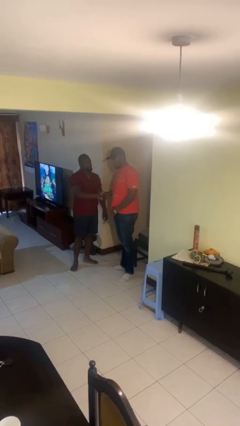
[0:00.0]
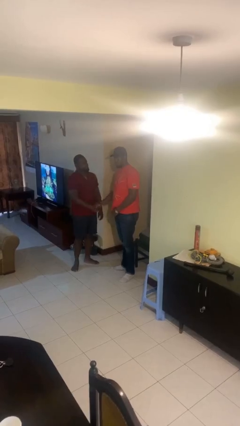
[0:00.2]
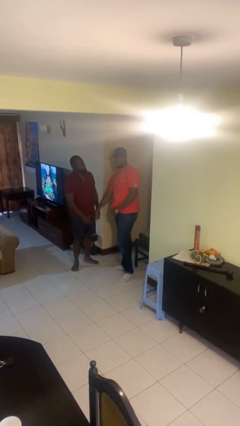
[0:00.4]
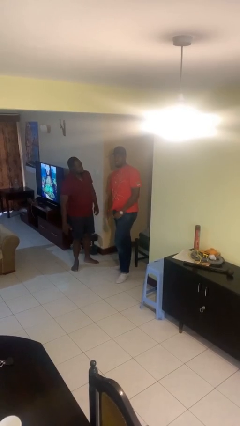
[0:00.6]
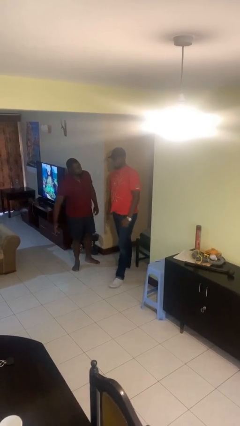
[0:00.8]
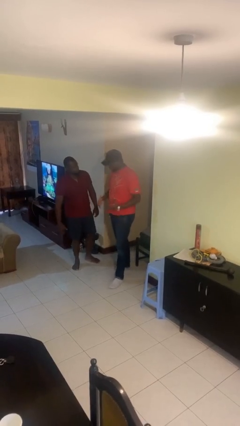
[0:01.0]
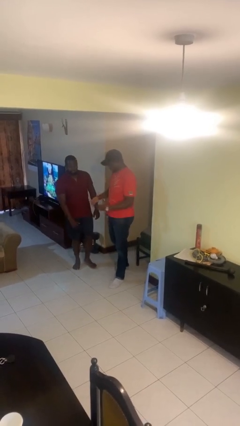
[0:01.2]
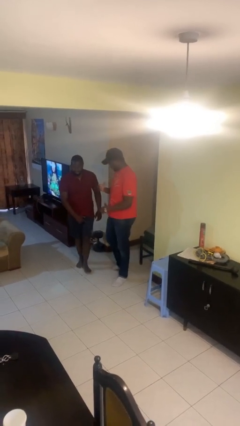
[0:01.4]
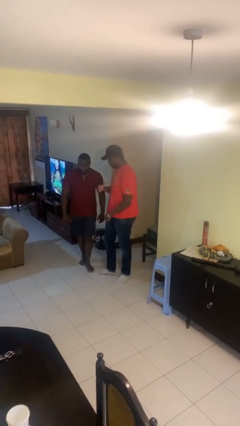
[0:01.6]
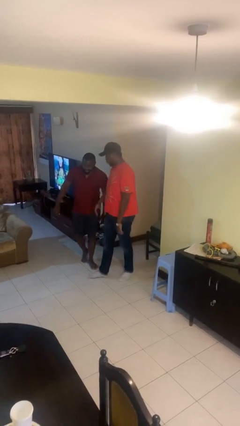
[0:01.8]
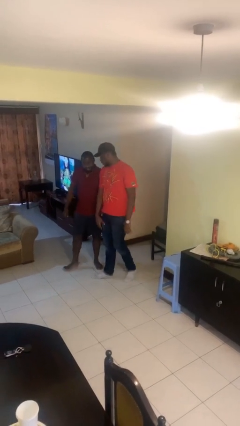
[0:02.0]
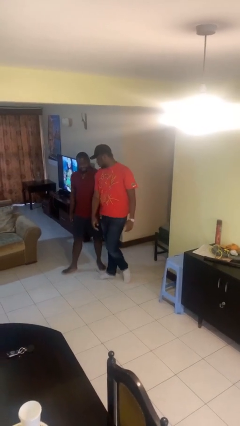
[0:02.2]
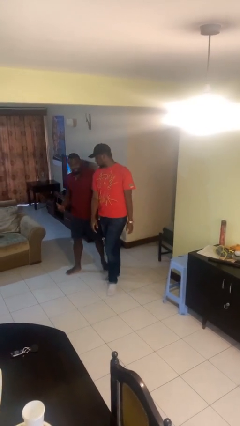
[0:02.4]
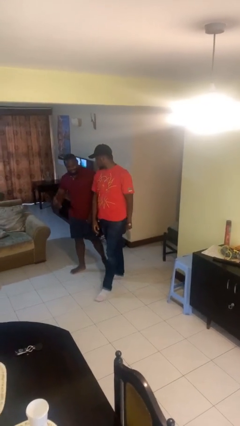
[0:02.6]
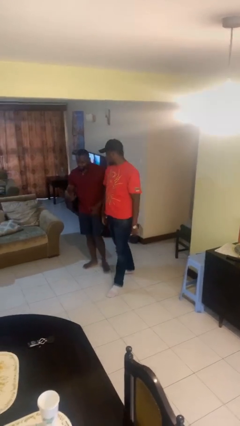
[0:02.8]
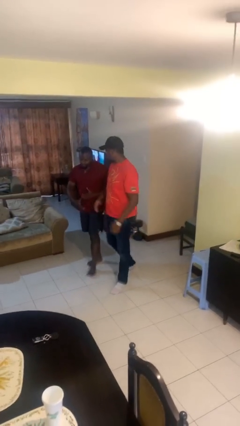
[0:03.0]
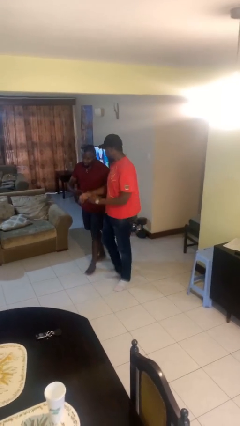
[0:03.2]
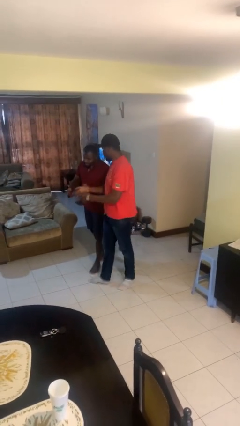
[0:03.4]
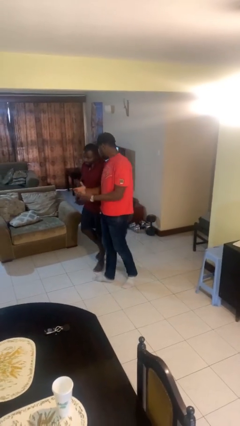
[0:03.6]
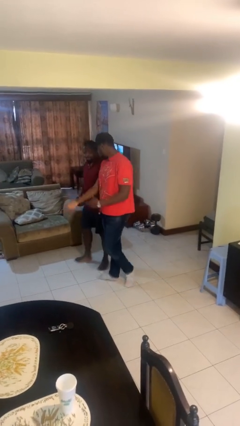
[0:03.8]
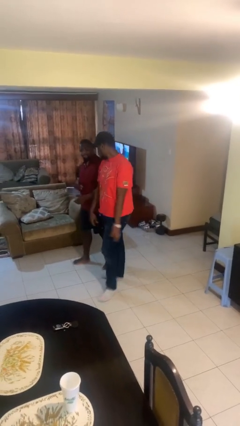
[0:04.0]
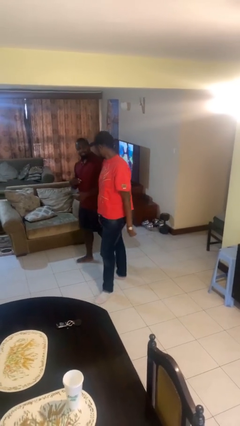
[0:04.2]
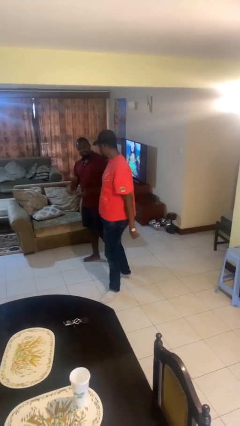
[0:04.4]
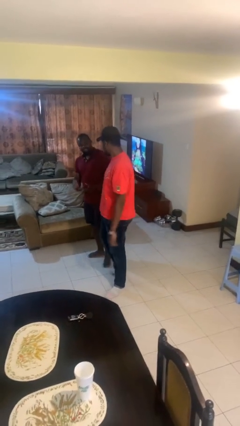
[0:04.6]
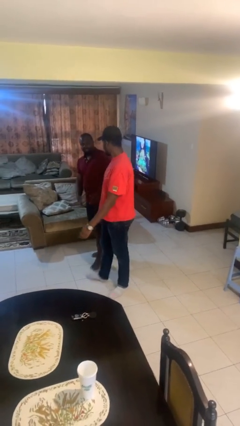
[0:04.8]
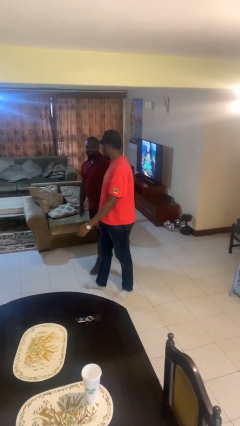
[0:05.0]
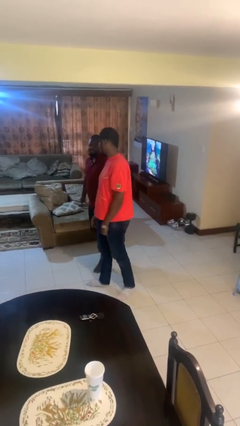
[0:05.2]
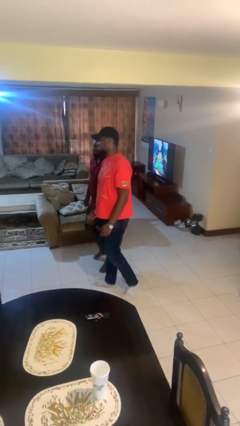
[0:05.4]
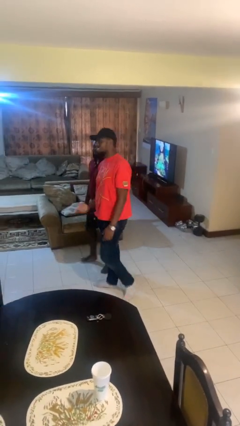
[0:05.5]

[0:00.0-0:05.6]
person talks to person

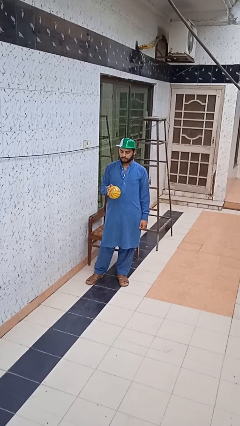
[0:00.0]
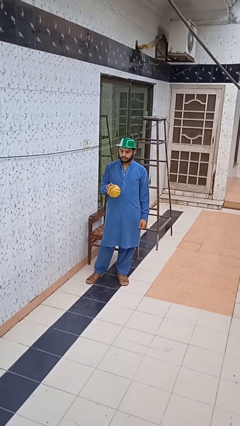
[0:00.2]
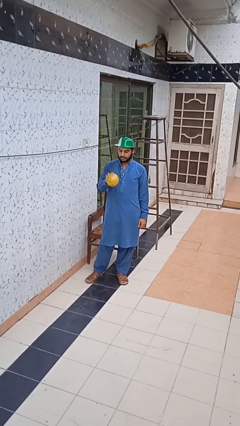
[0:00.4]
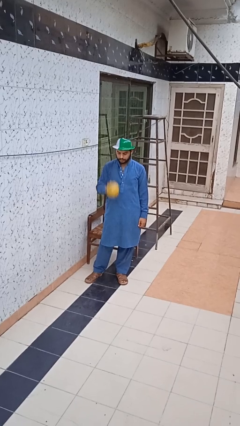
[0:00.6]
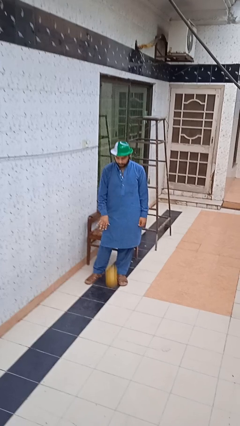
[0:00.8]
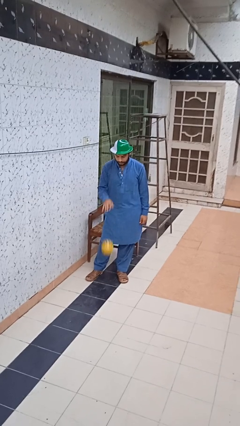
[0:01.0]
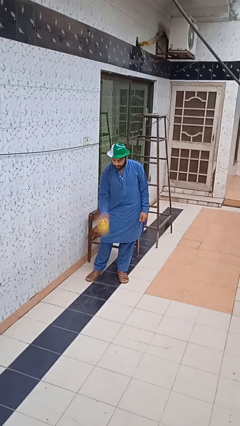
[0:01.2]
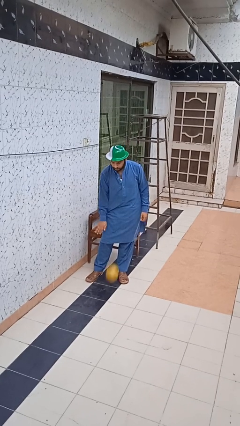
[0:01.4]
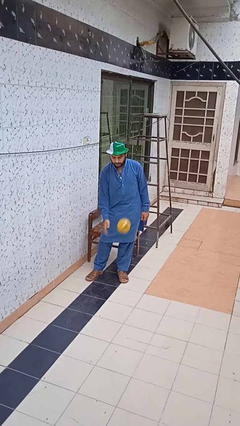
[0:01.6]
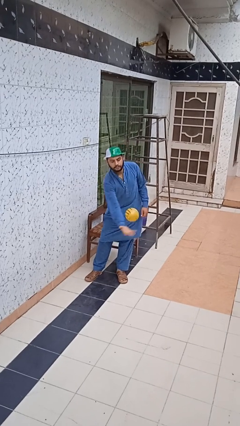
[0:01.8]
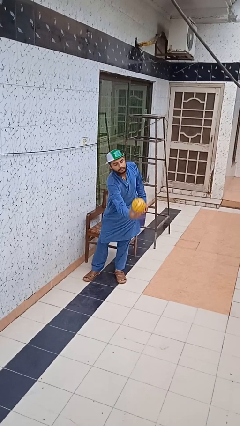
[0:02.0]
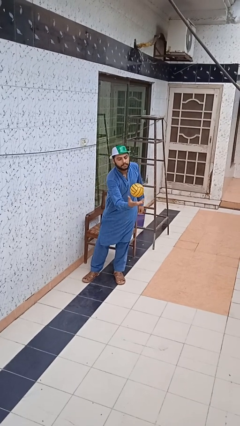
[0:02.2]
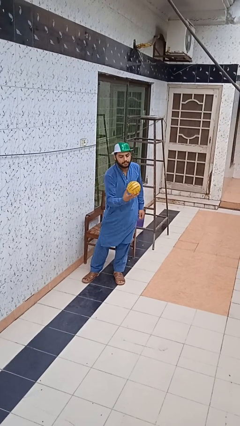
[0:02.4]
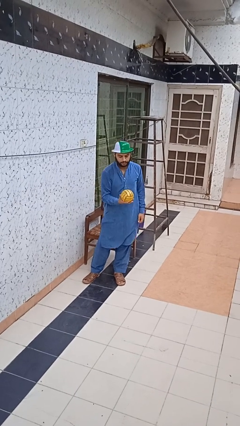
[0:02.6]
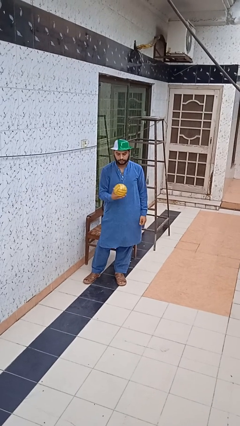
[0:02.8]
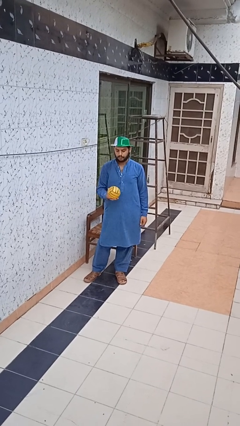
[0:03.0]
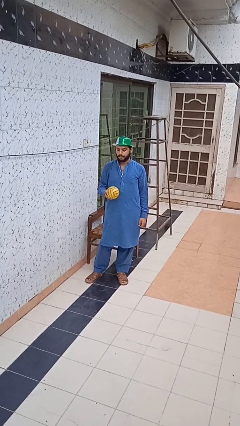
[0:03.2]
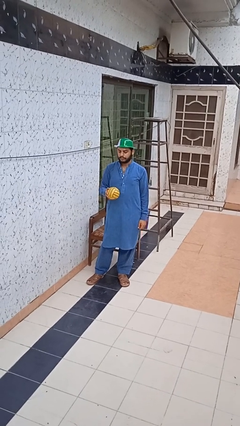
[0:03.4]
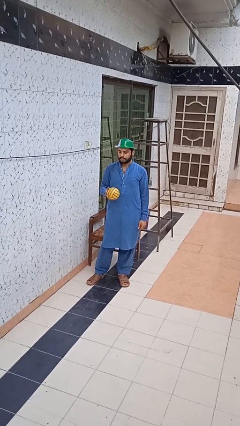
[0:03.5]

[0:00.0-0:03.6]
person bounces ball on floor

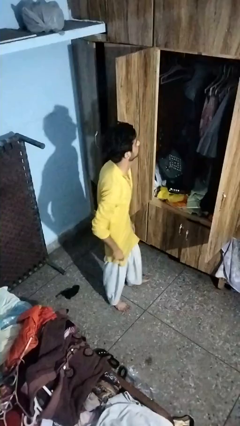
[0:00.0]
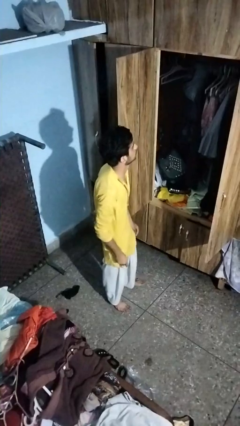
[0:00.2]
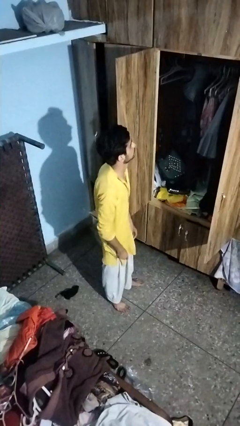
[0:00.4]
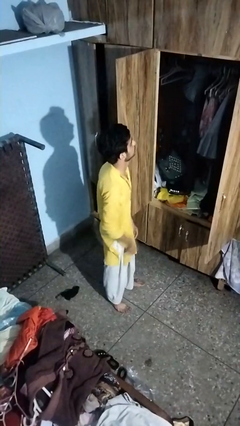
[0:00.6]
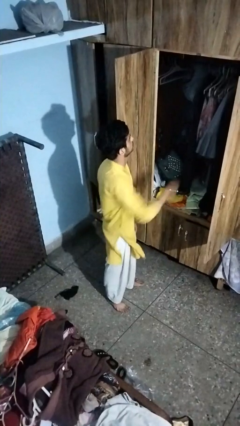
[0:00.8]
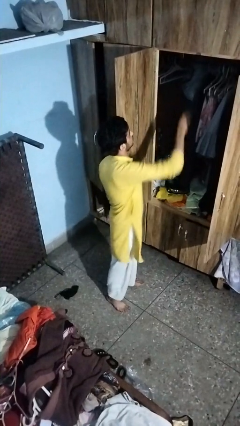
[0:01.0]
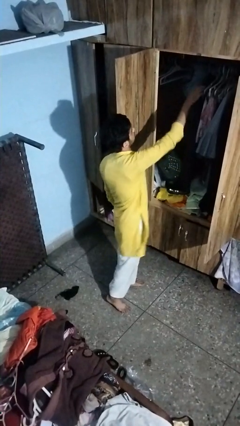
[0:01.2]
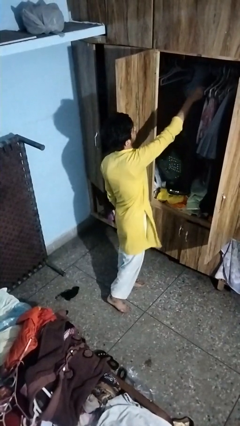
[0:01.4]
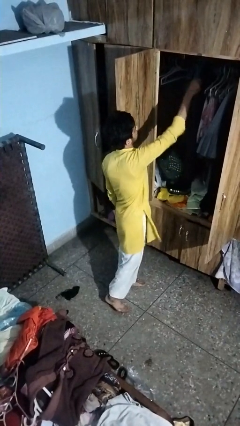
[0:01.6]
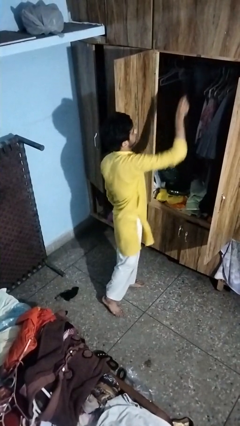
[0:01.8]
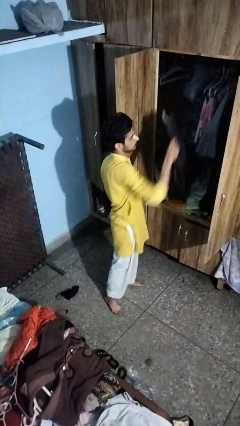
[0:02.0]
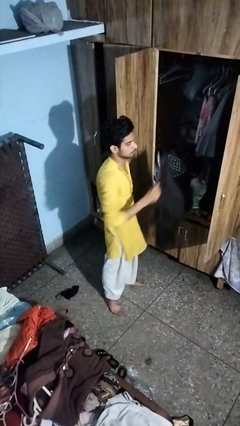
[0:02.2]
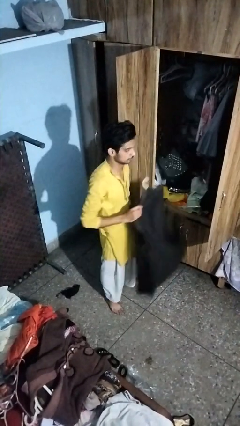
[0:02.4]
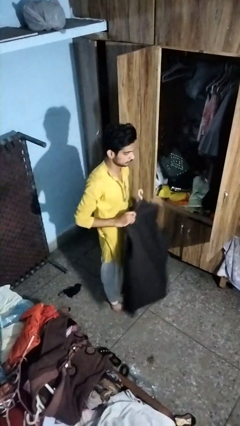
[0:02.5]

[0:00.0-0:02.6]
person takes clothes from closet

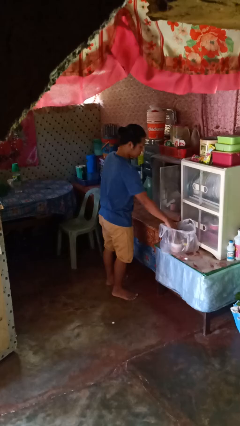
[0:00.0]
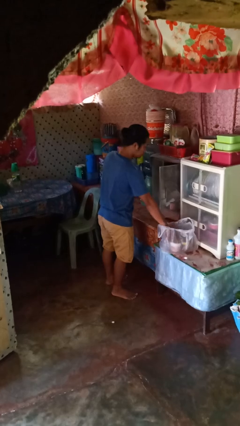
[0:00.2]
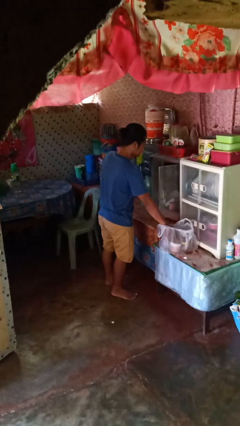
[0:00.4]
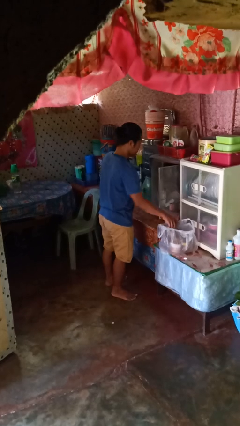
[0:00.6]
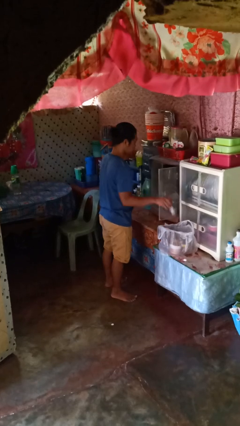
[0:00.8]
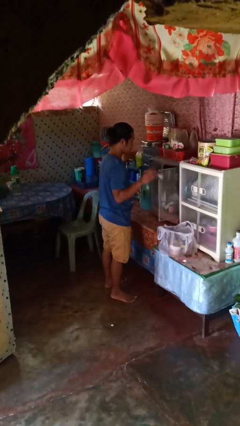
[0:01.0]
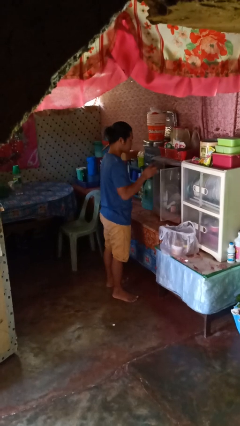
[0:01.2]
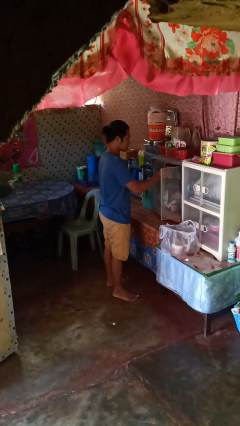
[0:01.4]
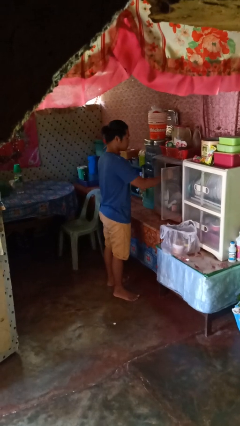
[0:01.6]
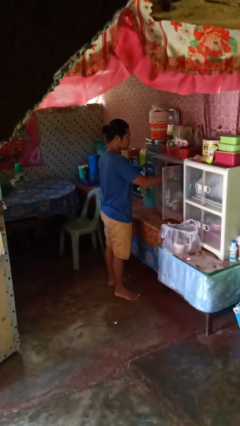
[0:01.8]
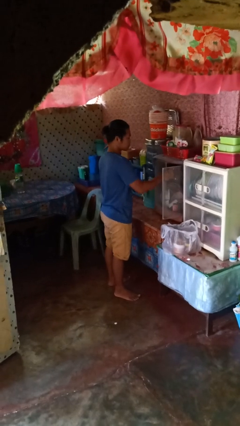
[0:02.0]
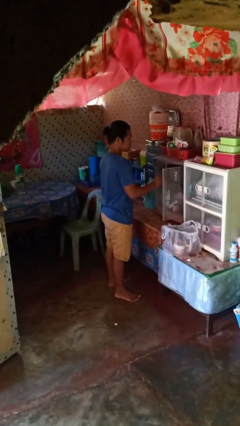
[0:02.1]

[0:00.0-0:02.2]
person loads groceries into cabinet

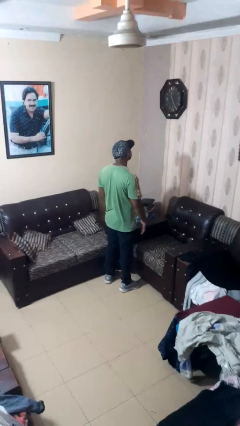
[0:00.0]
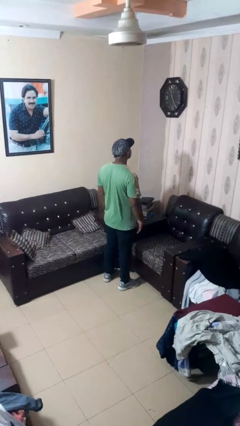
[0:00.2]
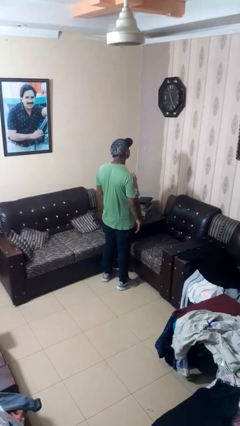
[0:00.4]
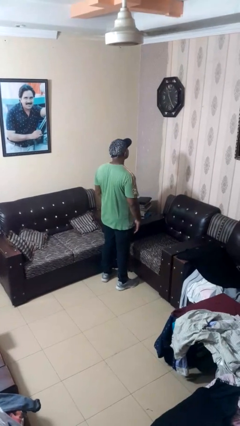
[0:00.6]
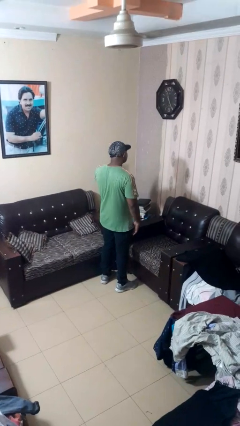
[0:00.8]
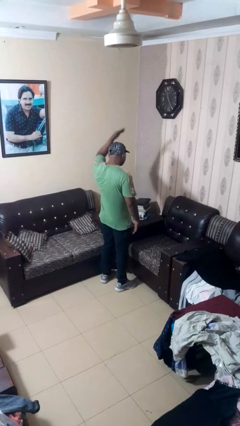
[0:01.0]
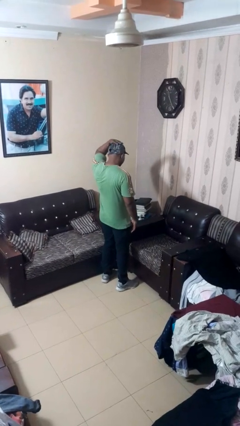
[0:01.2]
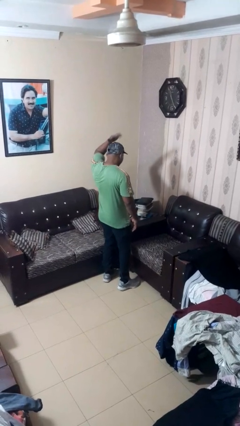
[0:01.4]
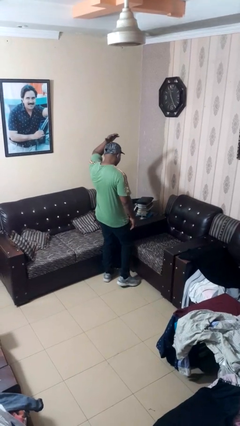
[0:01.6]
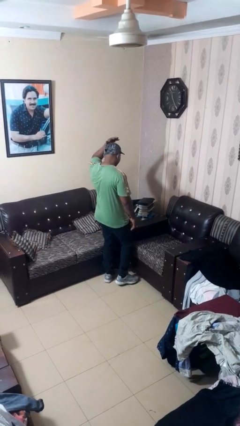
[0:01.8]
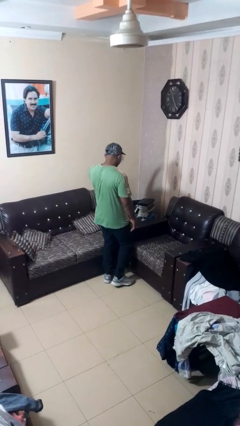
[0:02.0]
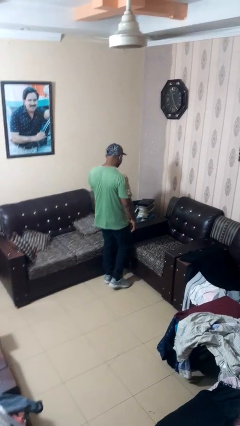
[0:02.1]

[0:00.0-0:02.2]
person pats head

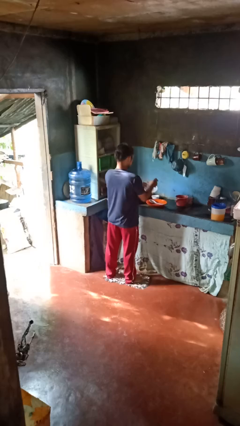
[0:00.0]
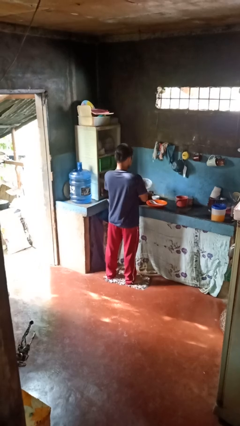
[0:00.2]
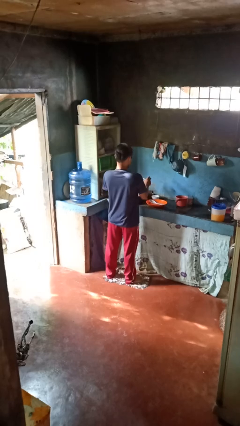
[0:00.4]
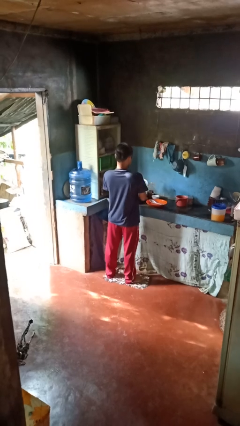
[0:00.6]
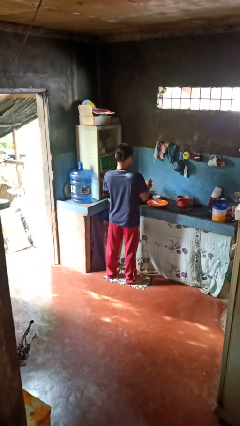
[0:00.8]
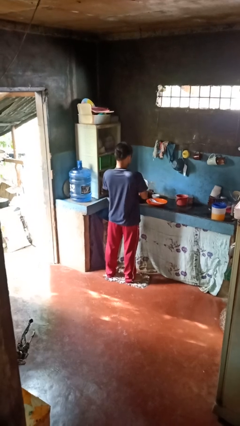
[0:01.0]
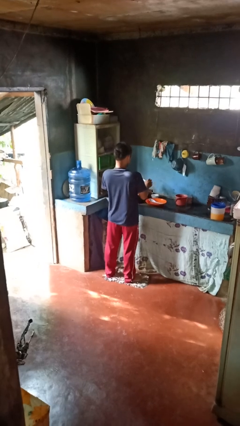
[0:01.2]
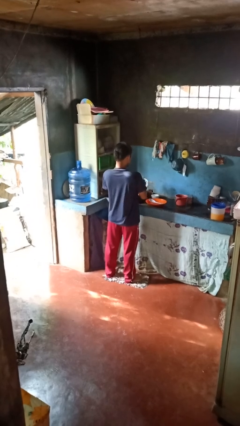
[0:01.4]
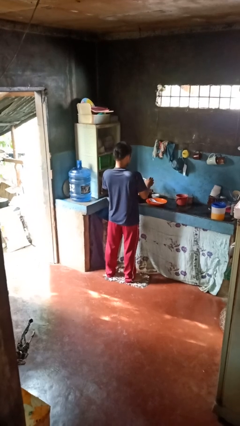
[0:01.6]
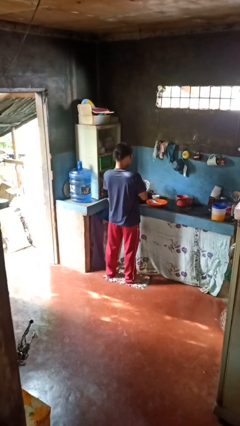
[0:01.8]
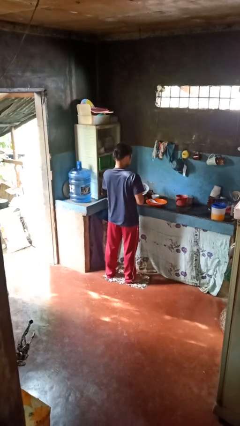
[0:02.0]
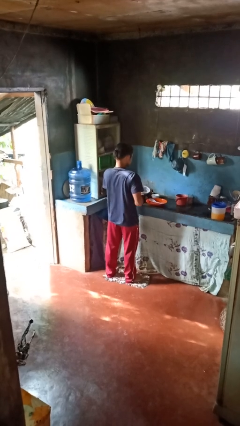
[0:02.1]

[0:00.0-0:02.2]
person washes dish
